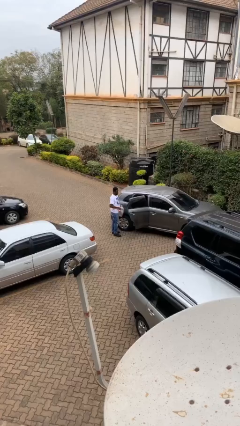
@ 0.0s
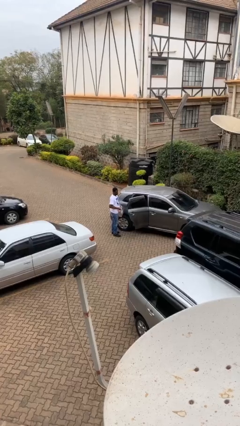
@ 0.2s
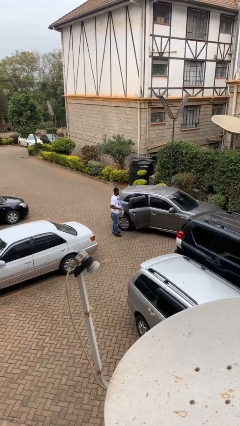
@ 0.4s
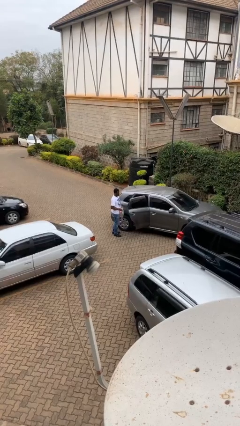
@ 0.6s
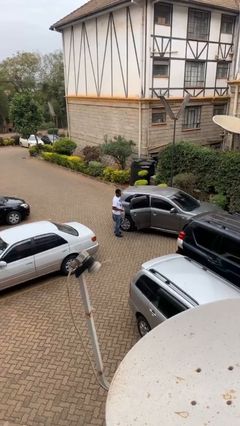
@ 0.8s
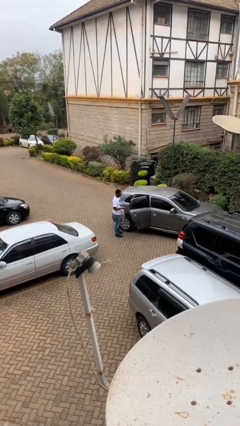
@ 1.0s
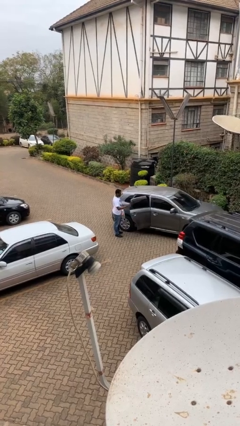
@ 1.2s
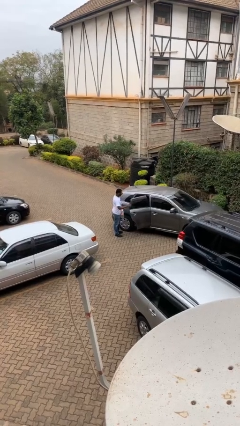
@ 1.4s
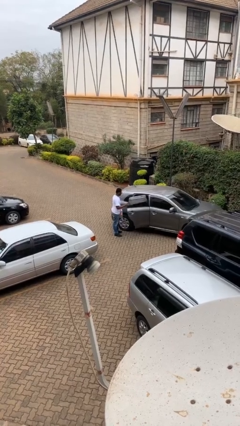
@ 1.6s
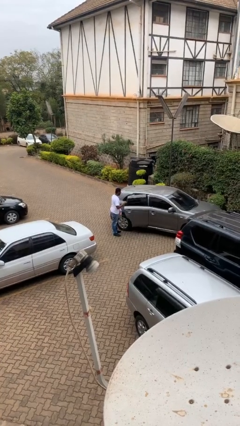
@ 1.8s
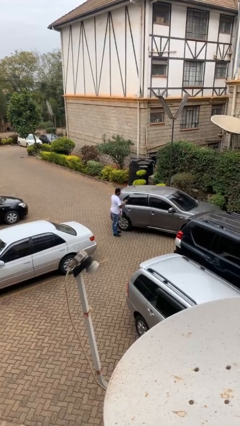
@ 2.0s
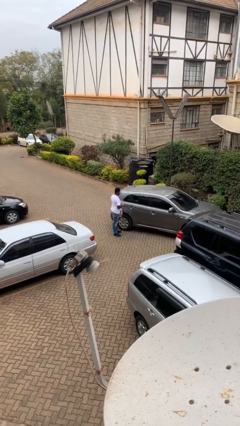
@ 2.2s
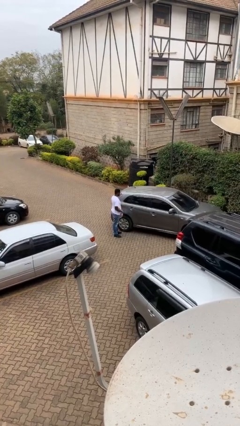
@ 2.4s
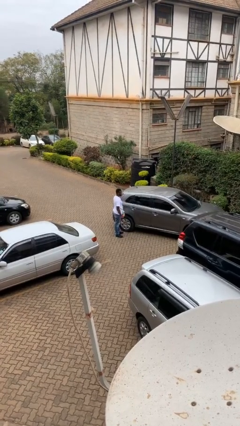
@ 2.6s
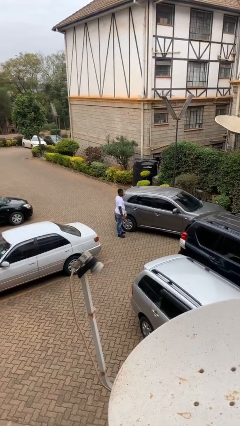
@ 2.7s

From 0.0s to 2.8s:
person closes car door

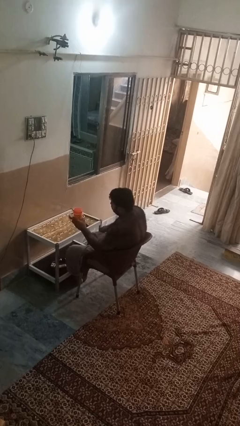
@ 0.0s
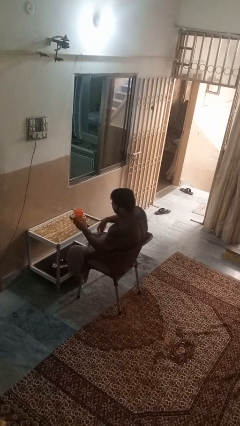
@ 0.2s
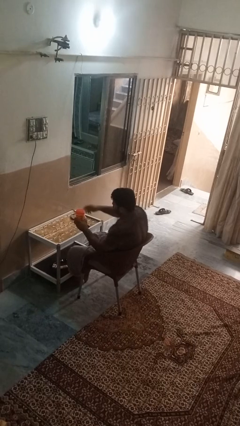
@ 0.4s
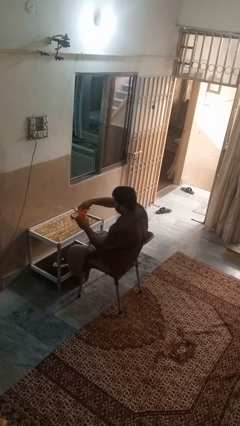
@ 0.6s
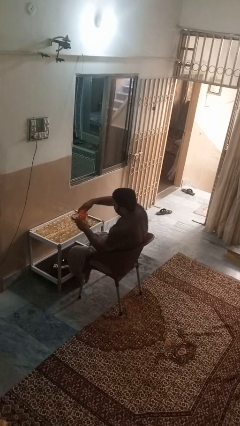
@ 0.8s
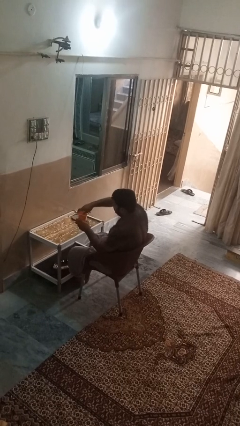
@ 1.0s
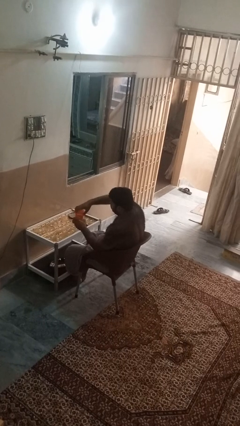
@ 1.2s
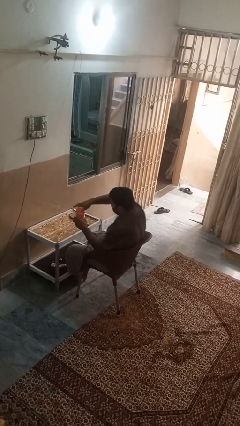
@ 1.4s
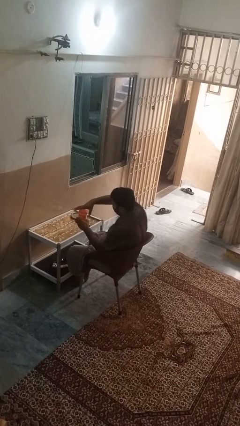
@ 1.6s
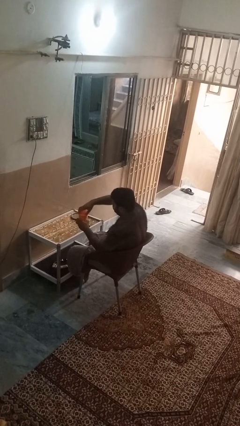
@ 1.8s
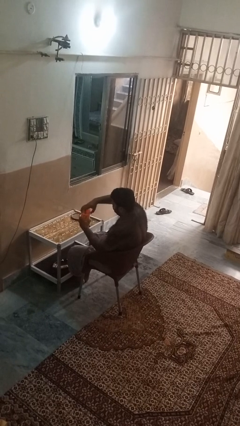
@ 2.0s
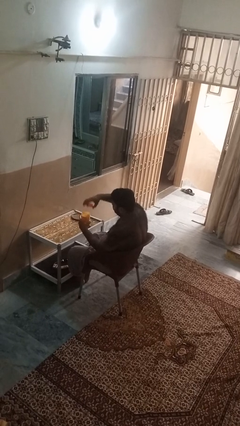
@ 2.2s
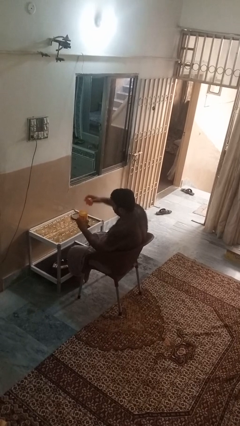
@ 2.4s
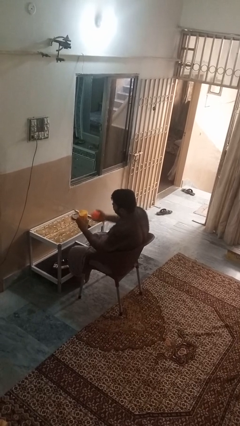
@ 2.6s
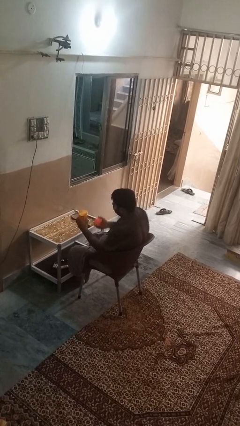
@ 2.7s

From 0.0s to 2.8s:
person opens jar

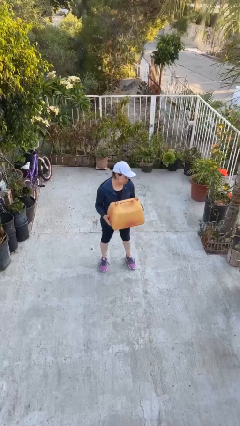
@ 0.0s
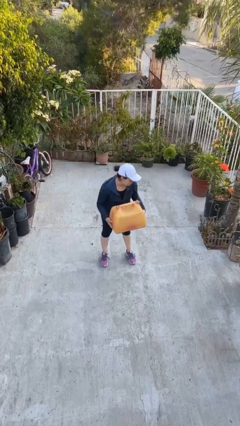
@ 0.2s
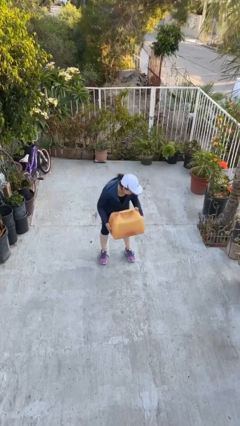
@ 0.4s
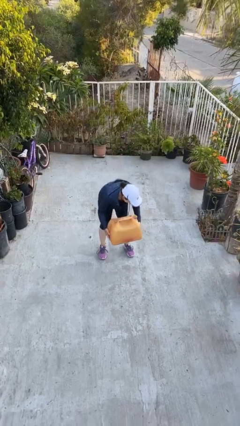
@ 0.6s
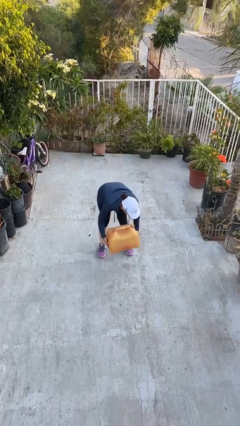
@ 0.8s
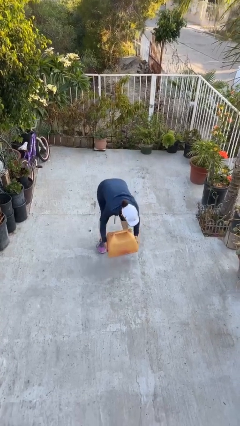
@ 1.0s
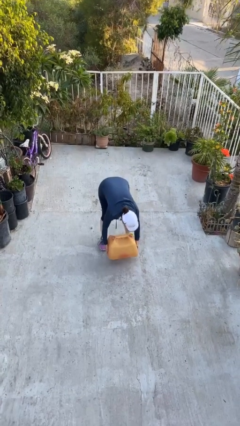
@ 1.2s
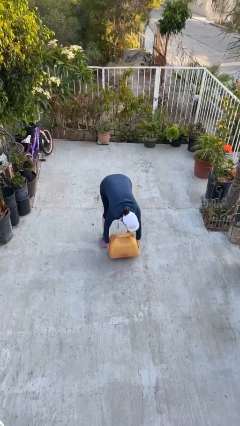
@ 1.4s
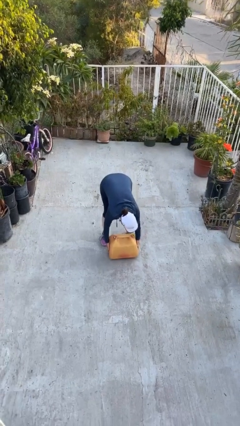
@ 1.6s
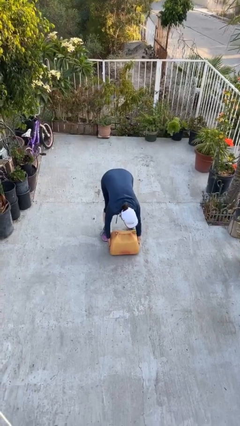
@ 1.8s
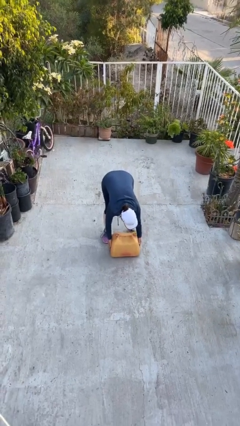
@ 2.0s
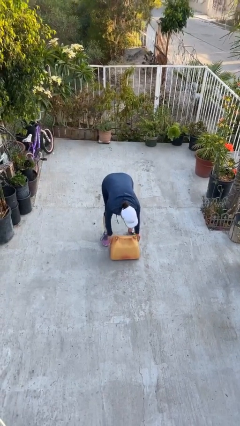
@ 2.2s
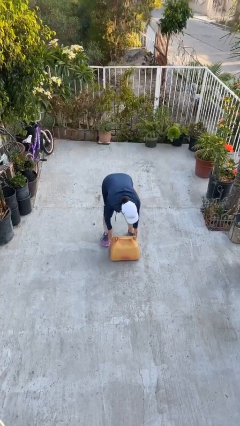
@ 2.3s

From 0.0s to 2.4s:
person puts down object on floor

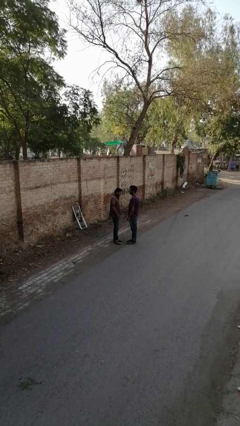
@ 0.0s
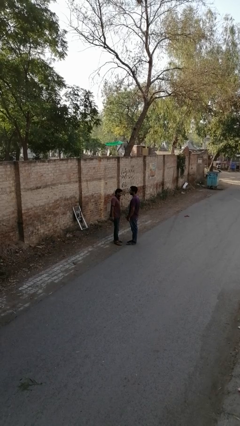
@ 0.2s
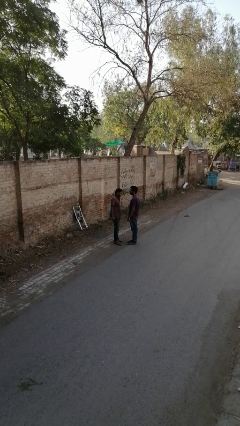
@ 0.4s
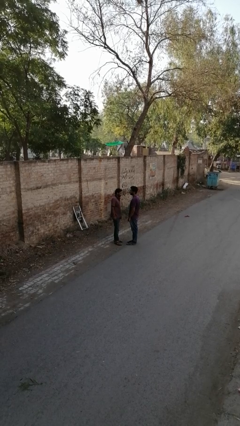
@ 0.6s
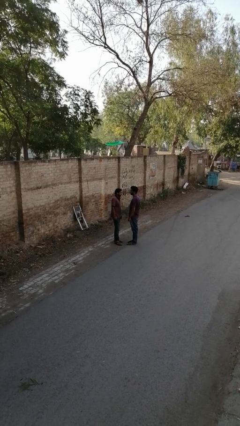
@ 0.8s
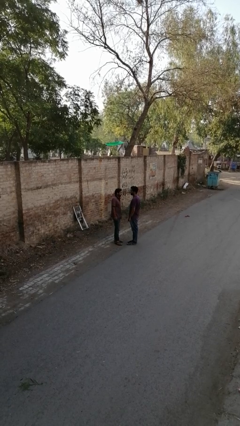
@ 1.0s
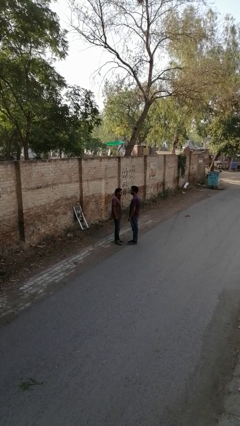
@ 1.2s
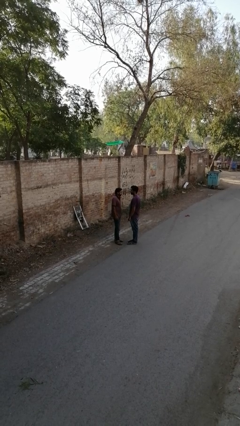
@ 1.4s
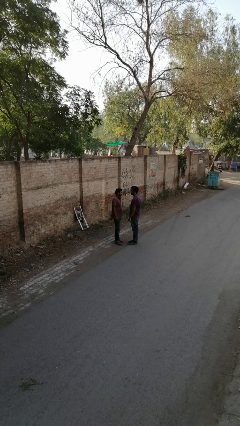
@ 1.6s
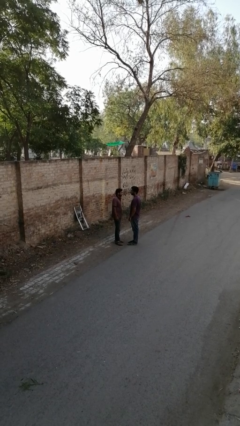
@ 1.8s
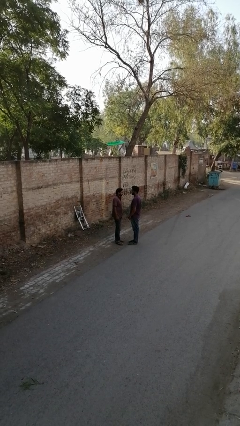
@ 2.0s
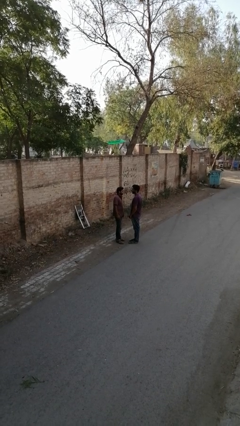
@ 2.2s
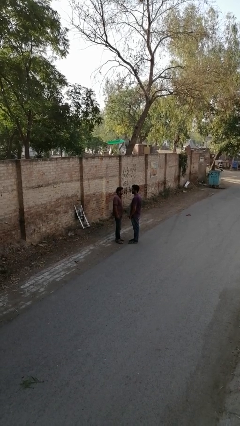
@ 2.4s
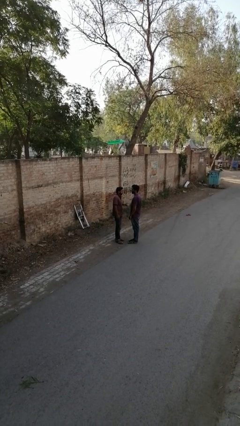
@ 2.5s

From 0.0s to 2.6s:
person highfives hand

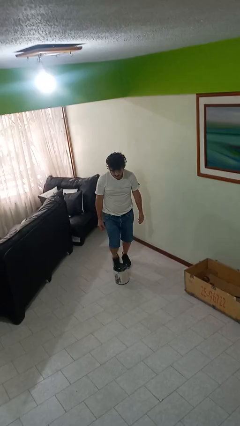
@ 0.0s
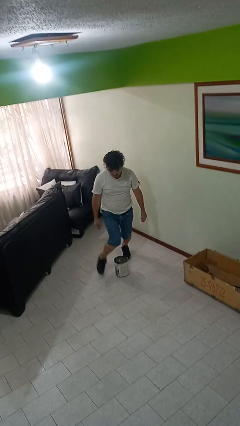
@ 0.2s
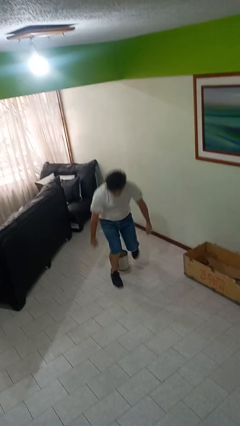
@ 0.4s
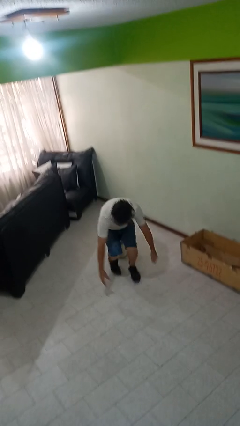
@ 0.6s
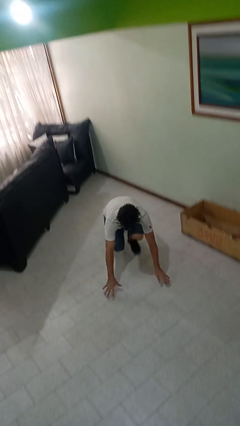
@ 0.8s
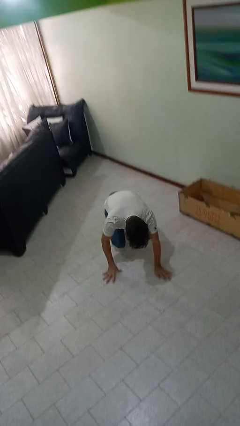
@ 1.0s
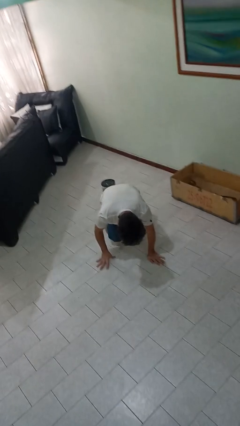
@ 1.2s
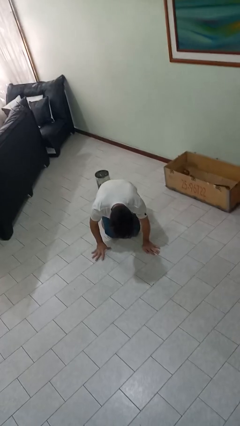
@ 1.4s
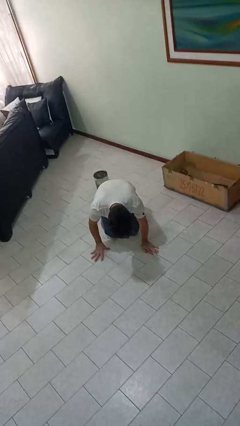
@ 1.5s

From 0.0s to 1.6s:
person trips on object on floor

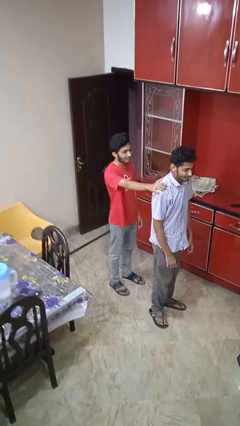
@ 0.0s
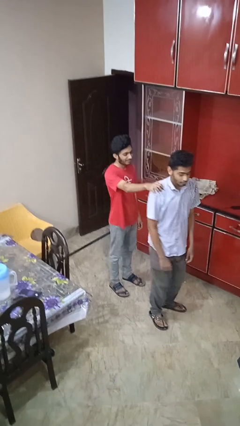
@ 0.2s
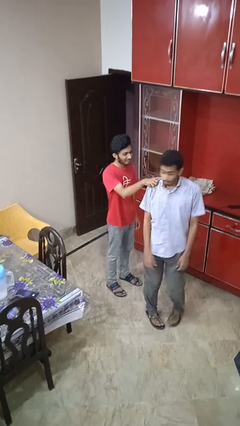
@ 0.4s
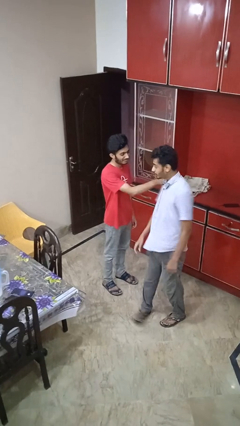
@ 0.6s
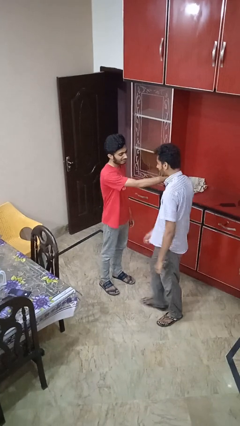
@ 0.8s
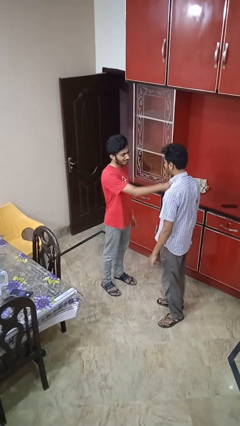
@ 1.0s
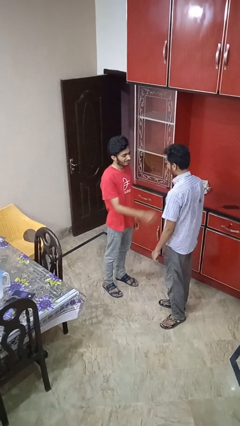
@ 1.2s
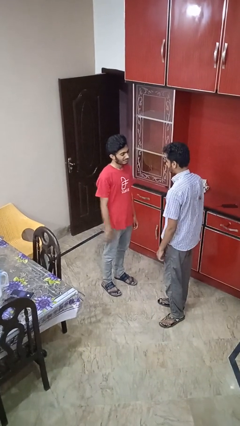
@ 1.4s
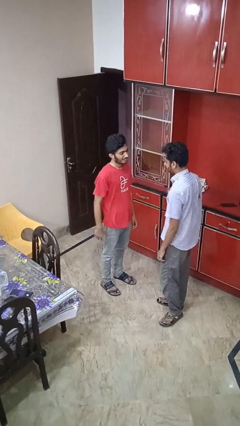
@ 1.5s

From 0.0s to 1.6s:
person spins person around

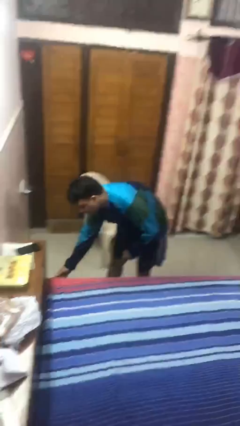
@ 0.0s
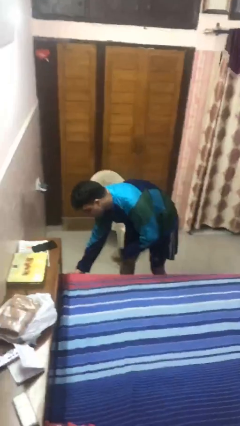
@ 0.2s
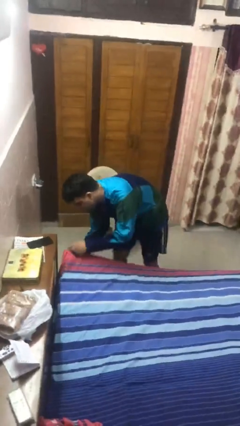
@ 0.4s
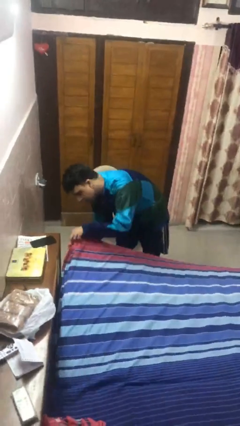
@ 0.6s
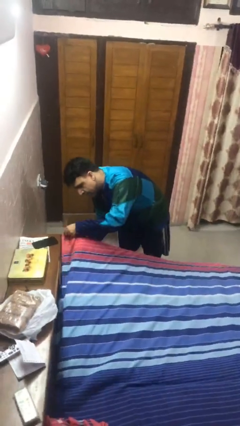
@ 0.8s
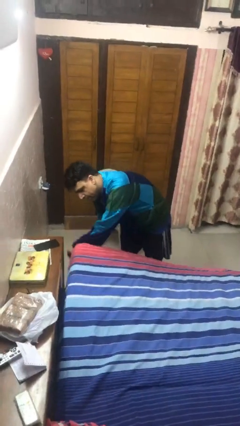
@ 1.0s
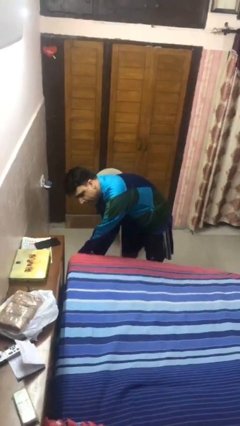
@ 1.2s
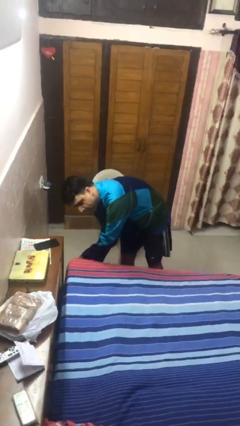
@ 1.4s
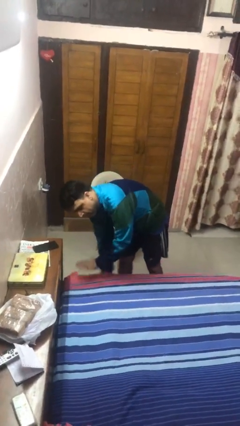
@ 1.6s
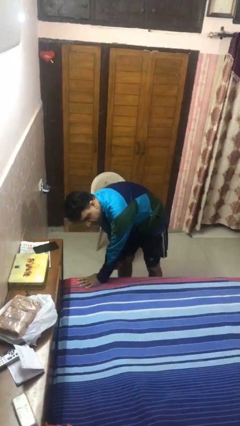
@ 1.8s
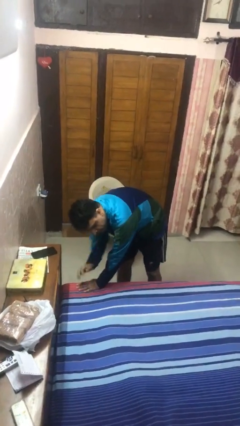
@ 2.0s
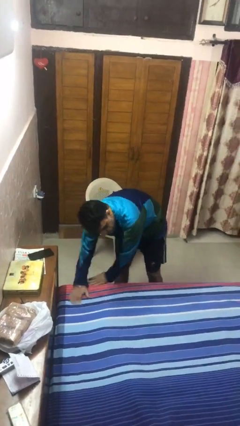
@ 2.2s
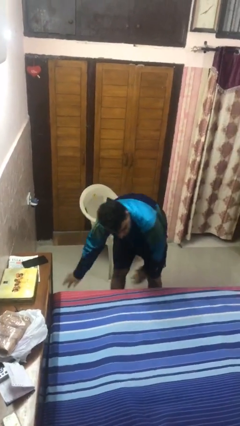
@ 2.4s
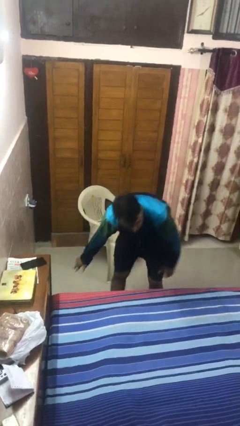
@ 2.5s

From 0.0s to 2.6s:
person makes bed

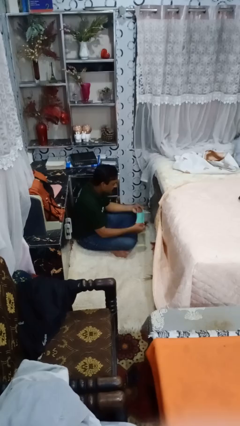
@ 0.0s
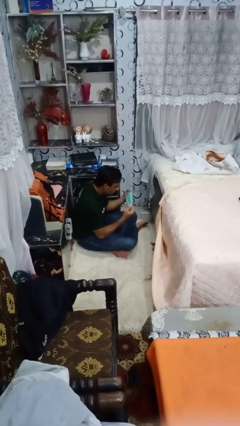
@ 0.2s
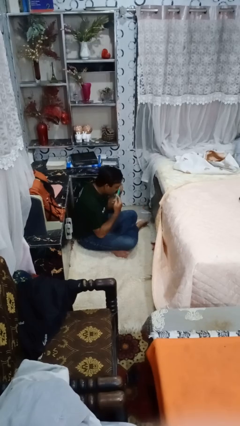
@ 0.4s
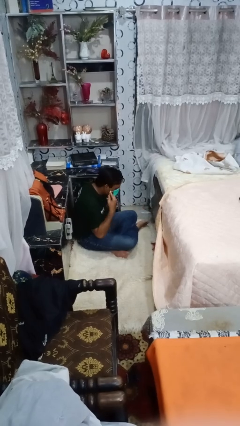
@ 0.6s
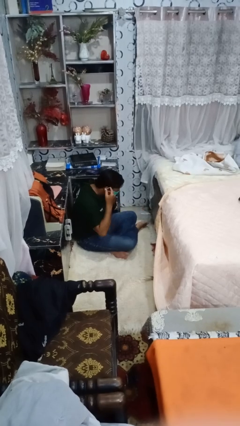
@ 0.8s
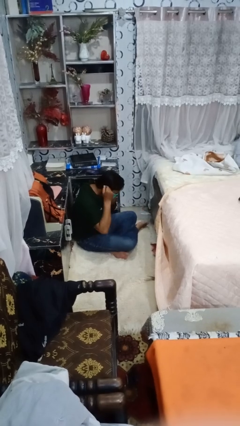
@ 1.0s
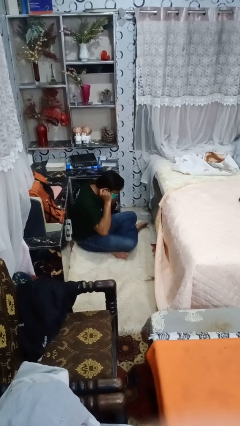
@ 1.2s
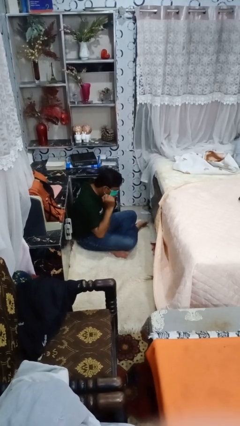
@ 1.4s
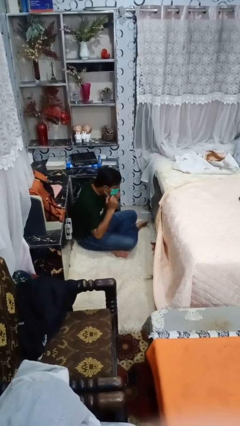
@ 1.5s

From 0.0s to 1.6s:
person puts on facemask